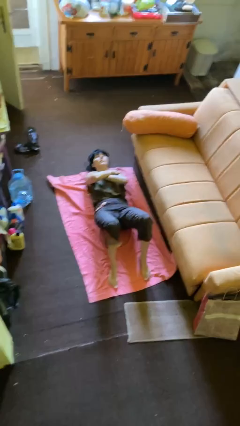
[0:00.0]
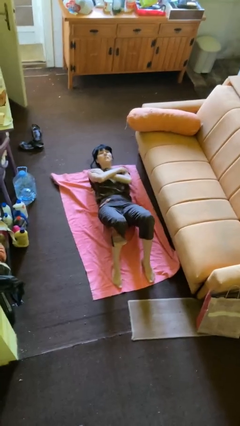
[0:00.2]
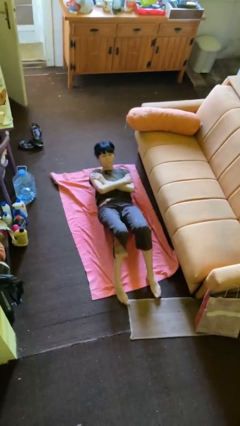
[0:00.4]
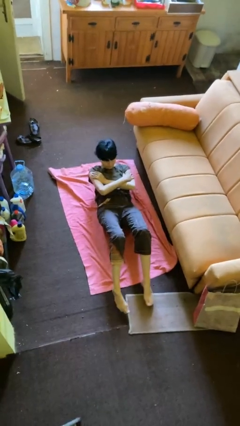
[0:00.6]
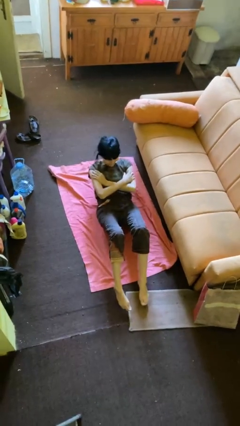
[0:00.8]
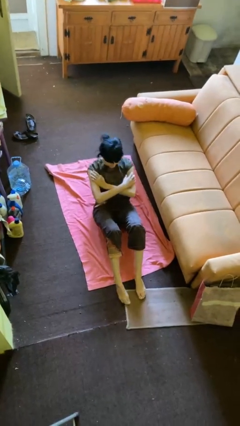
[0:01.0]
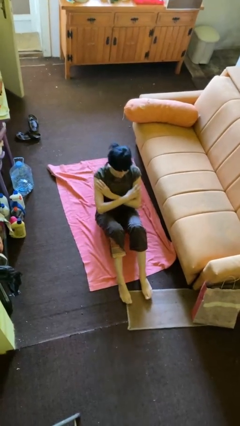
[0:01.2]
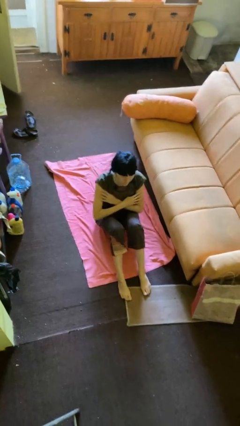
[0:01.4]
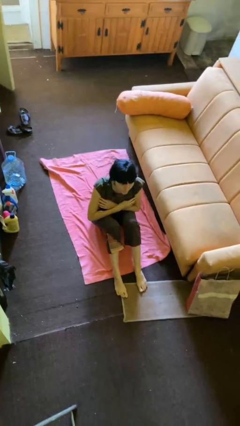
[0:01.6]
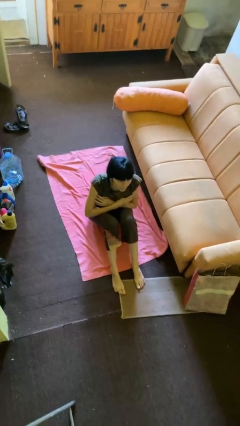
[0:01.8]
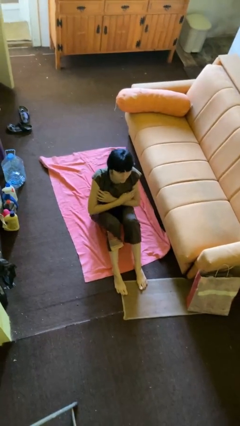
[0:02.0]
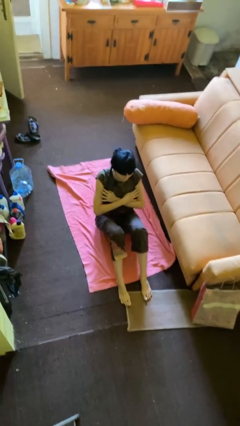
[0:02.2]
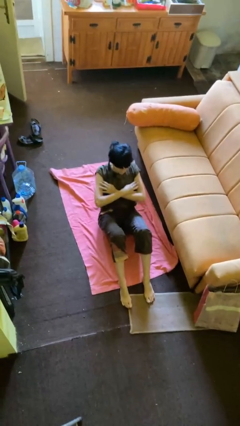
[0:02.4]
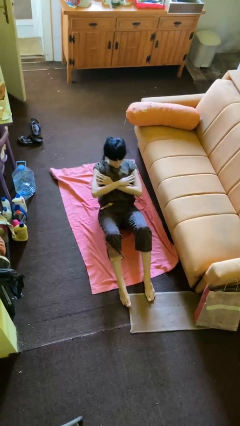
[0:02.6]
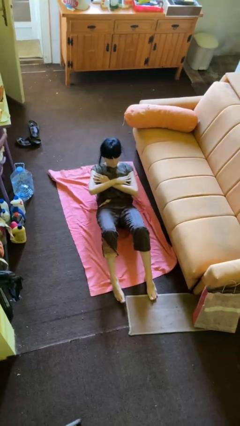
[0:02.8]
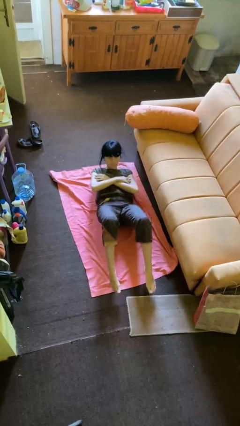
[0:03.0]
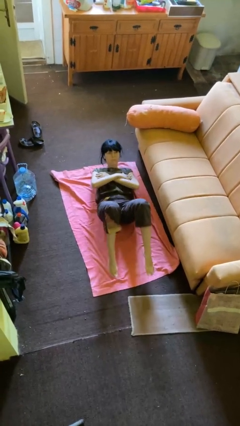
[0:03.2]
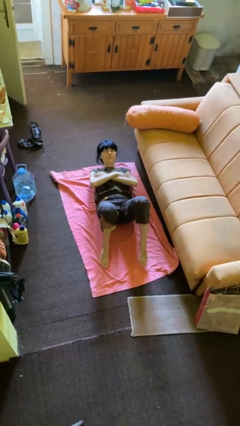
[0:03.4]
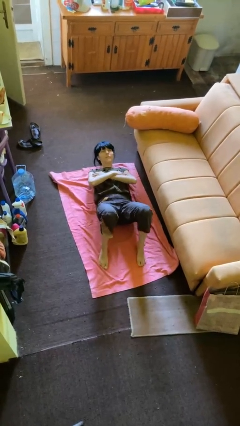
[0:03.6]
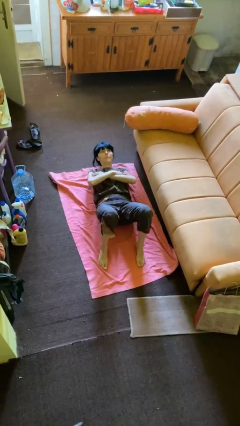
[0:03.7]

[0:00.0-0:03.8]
person exercises with situp

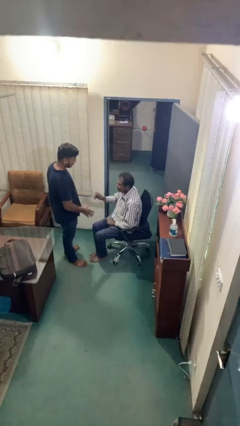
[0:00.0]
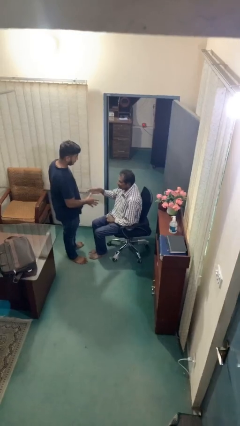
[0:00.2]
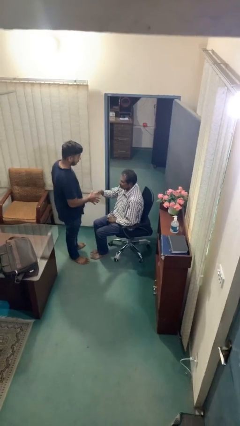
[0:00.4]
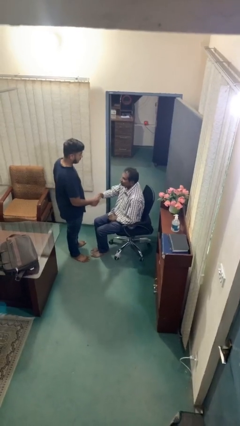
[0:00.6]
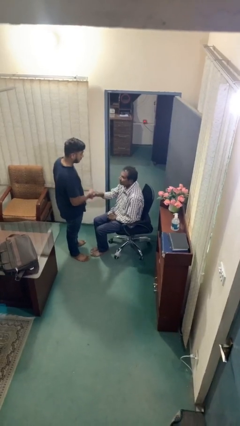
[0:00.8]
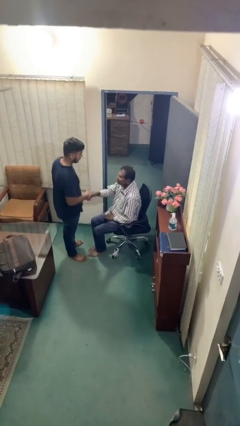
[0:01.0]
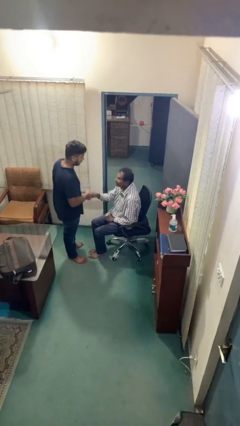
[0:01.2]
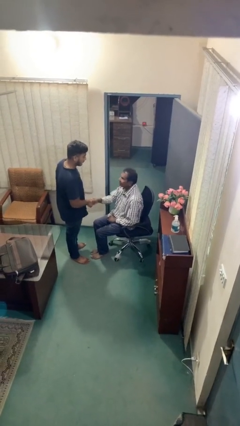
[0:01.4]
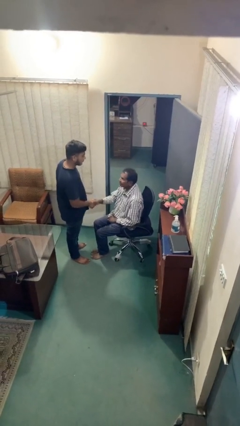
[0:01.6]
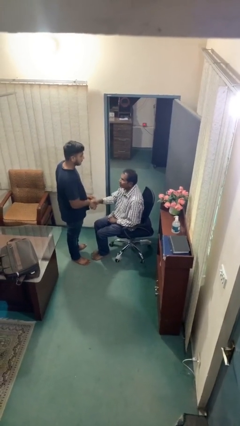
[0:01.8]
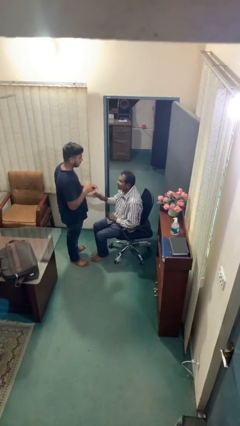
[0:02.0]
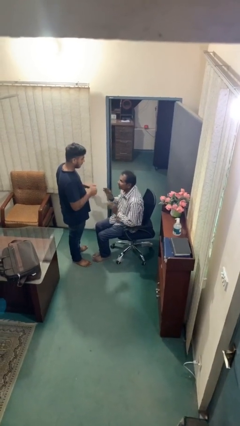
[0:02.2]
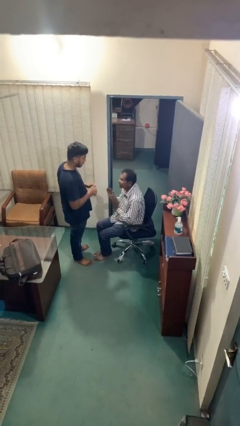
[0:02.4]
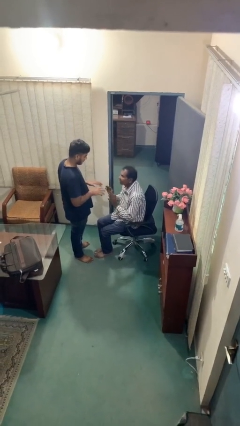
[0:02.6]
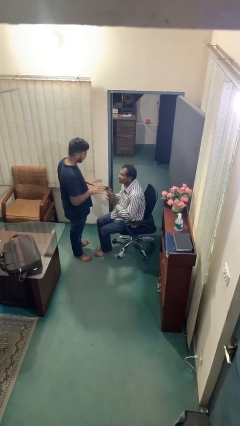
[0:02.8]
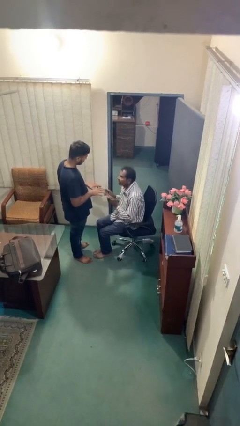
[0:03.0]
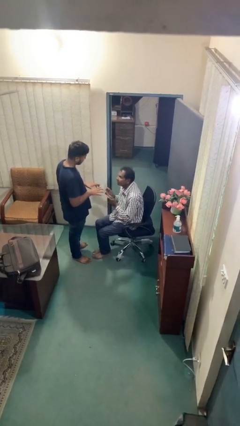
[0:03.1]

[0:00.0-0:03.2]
person shakes hand

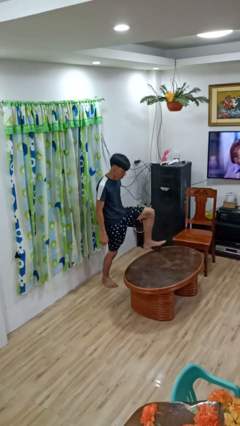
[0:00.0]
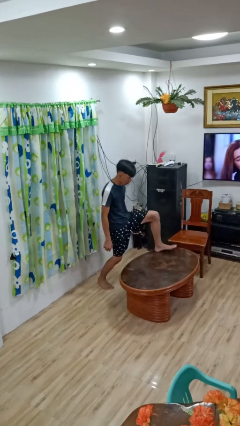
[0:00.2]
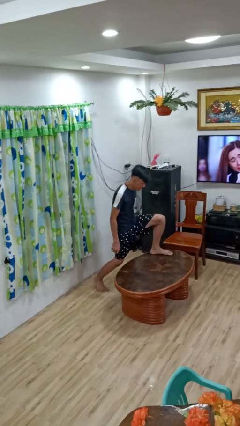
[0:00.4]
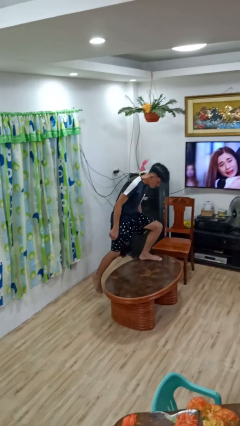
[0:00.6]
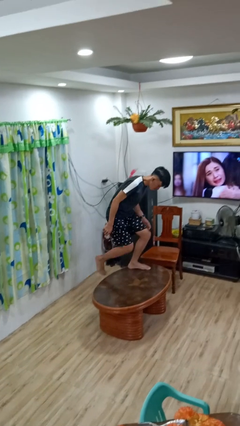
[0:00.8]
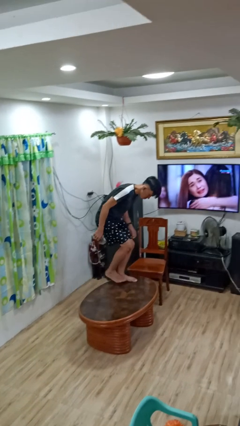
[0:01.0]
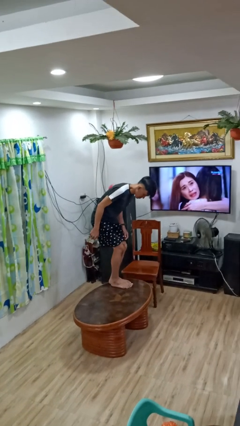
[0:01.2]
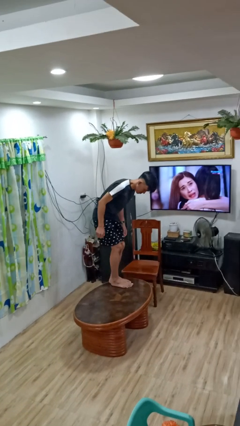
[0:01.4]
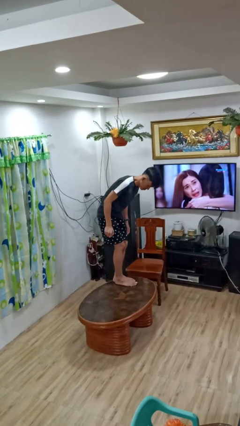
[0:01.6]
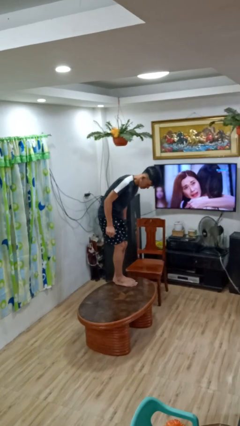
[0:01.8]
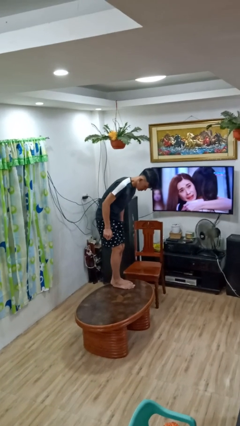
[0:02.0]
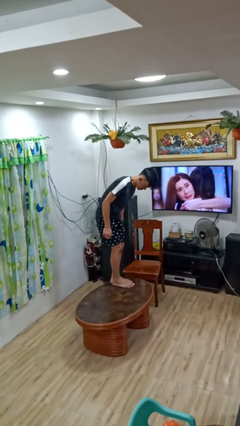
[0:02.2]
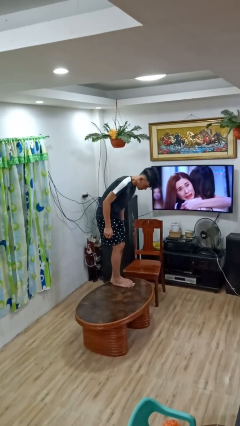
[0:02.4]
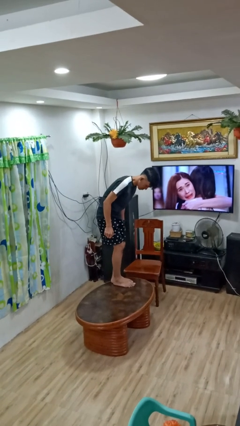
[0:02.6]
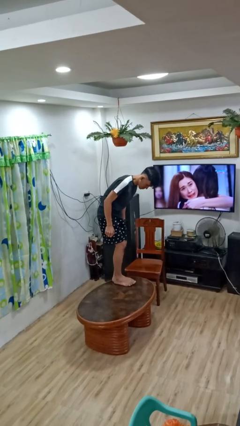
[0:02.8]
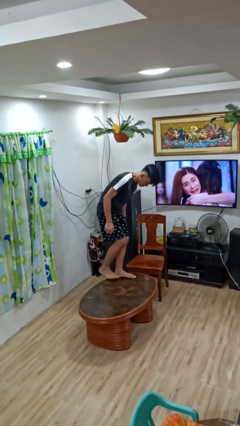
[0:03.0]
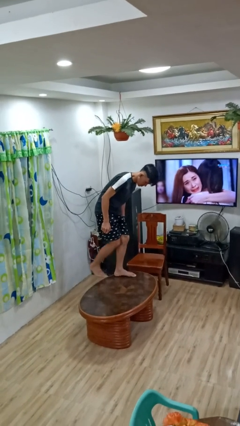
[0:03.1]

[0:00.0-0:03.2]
person climbs on table

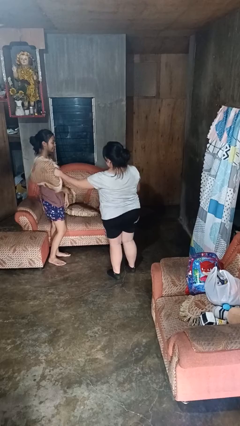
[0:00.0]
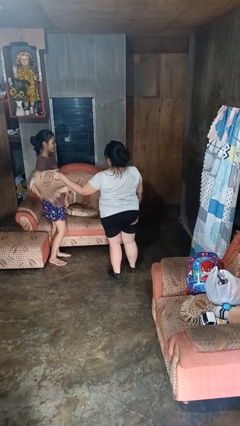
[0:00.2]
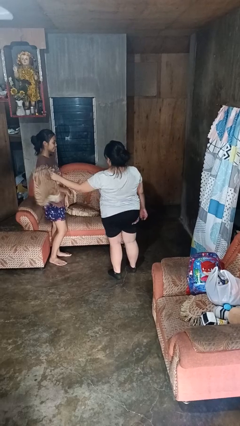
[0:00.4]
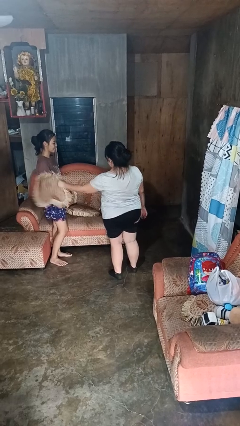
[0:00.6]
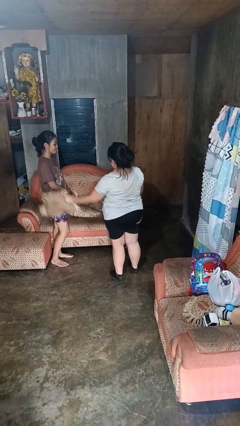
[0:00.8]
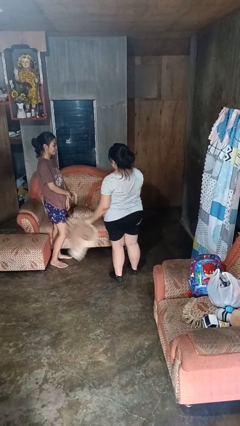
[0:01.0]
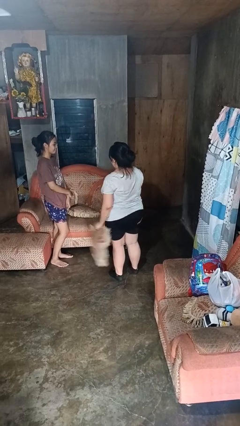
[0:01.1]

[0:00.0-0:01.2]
person hits person with pillow

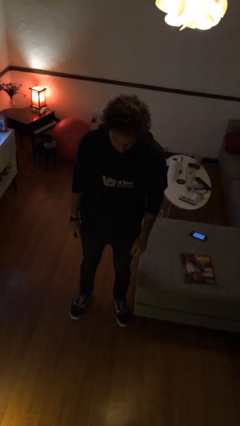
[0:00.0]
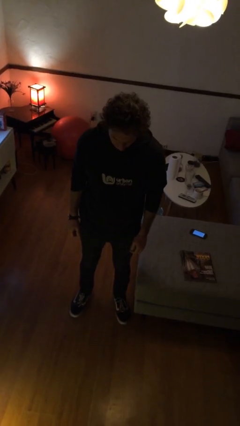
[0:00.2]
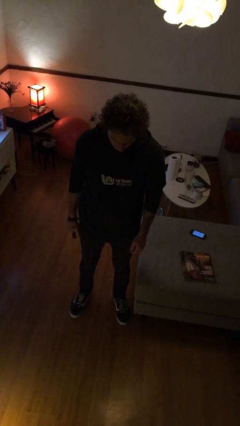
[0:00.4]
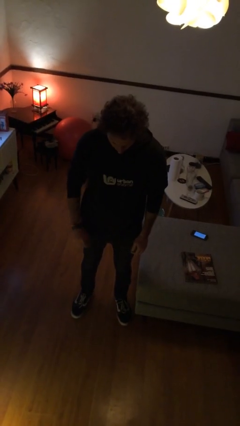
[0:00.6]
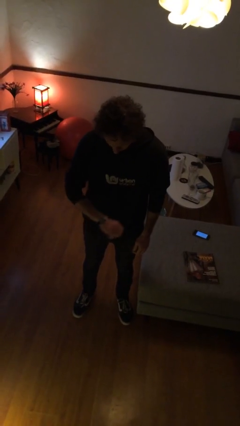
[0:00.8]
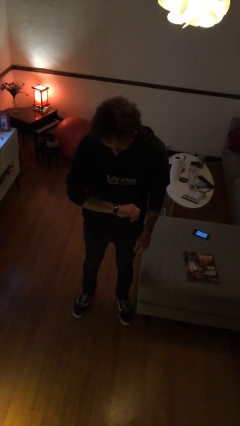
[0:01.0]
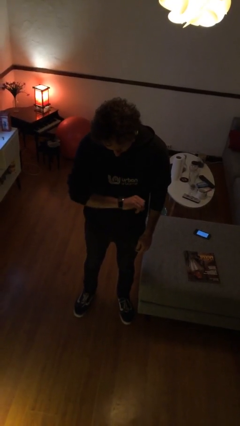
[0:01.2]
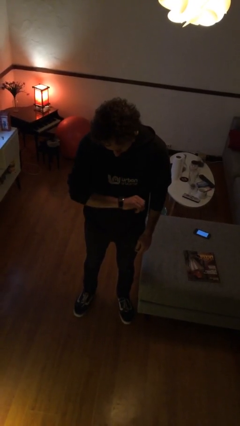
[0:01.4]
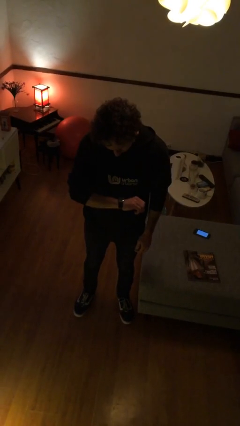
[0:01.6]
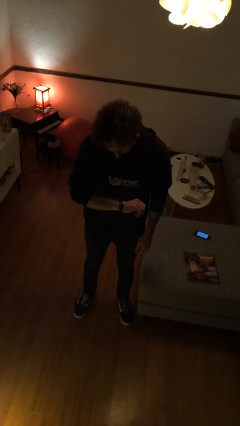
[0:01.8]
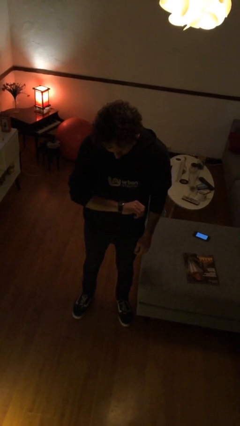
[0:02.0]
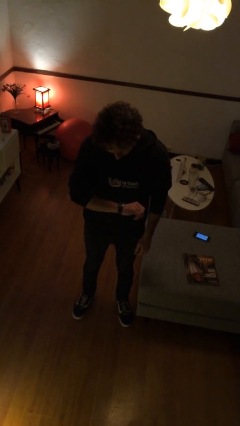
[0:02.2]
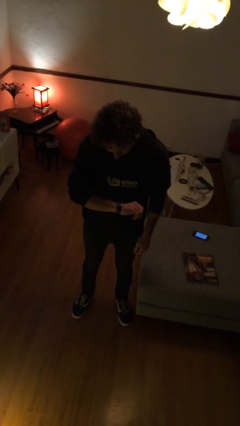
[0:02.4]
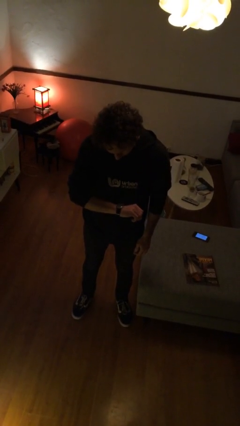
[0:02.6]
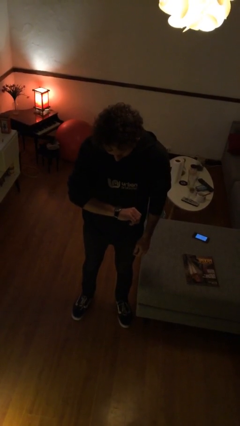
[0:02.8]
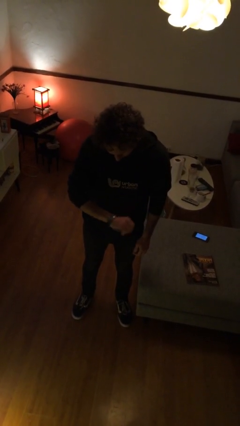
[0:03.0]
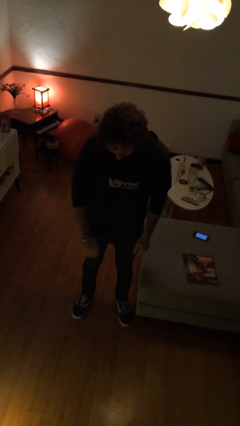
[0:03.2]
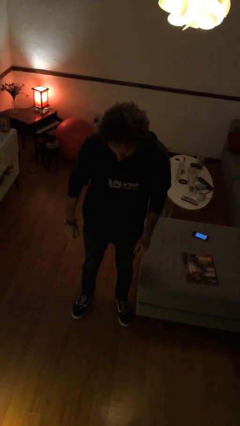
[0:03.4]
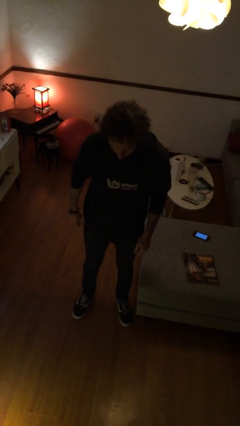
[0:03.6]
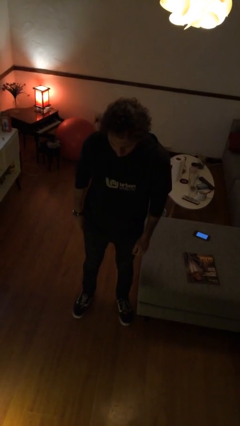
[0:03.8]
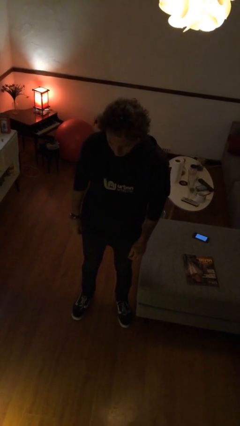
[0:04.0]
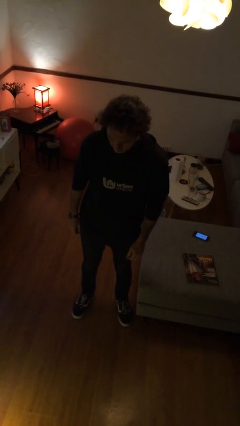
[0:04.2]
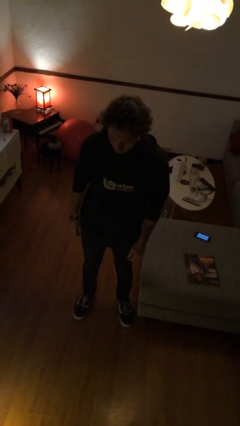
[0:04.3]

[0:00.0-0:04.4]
person looks at wristwatch

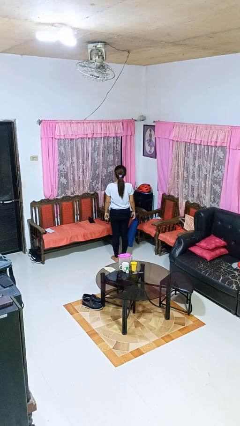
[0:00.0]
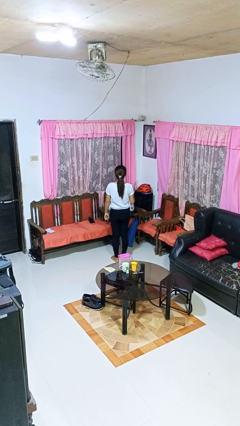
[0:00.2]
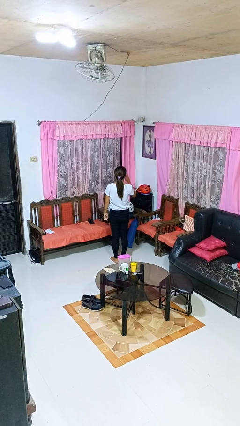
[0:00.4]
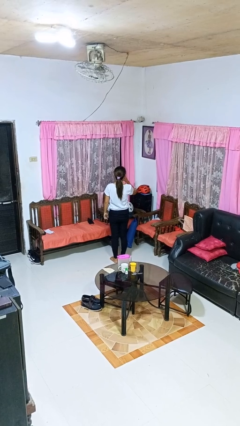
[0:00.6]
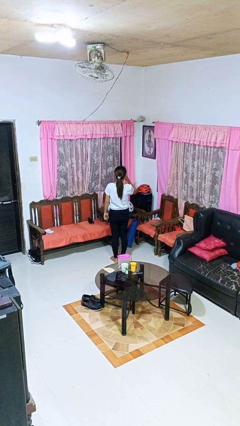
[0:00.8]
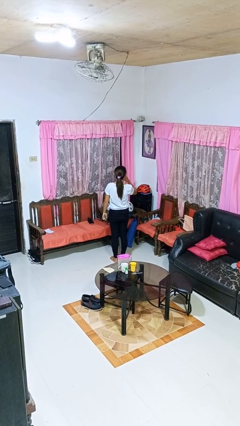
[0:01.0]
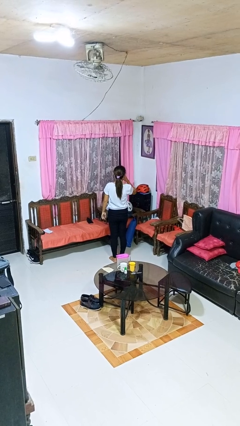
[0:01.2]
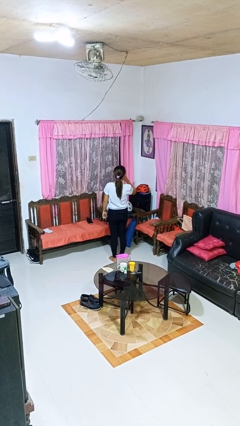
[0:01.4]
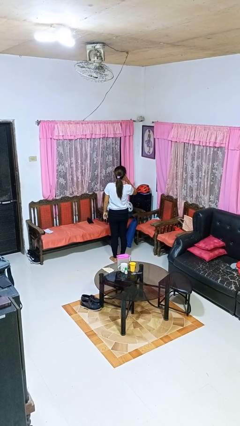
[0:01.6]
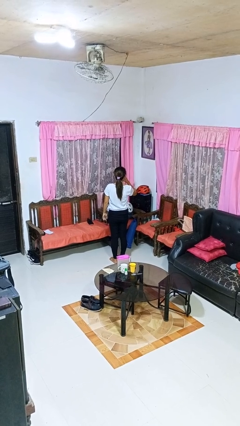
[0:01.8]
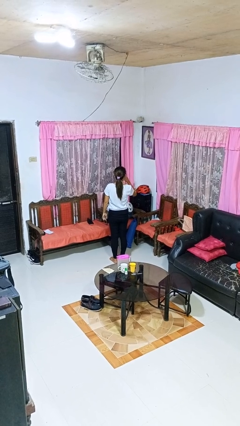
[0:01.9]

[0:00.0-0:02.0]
person gestures be quiet
